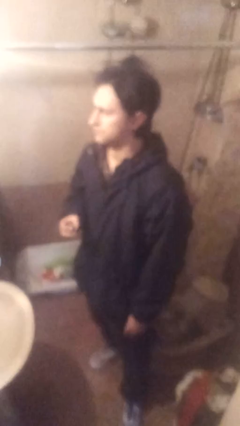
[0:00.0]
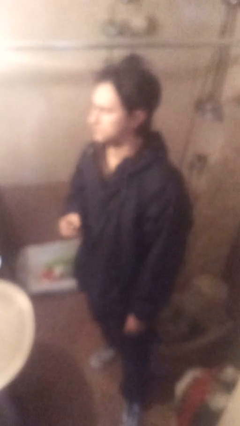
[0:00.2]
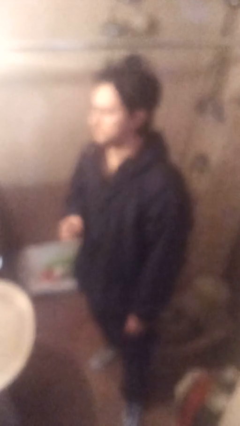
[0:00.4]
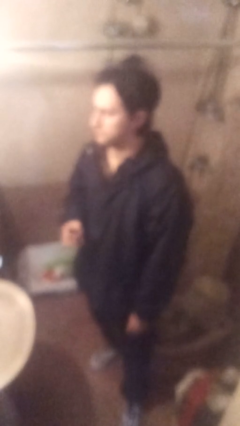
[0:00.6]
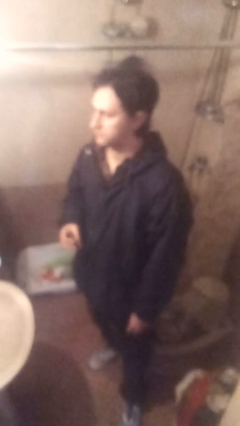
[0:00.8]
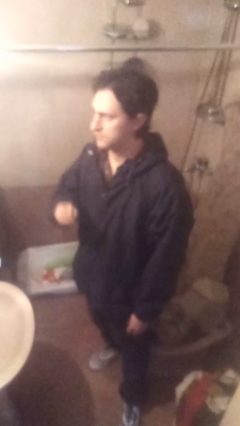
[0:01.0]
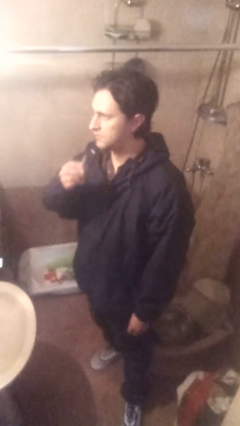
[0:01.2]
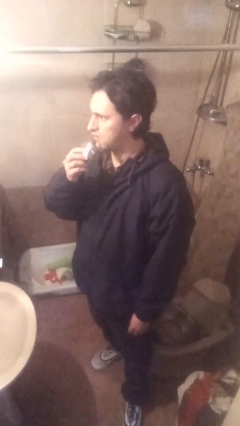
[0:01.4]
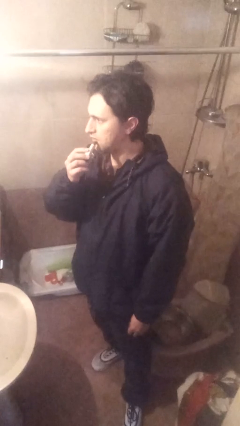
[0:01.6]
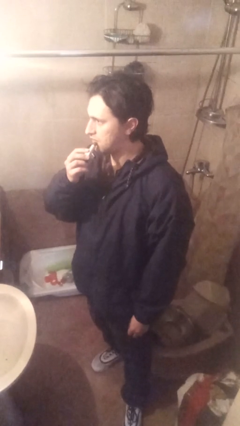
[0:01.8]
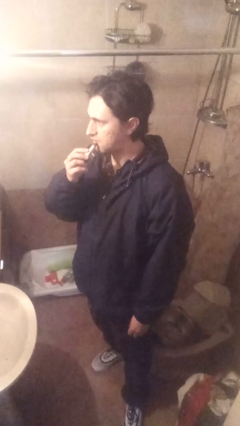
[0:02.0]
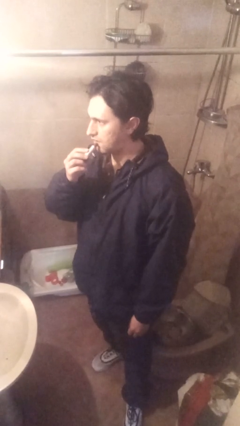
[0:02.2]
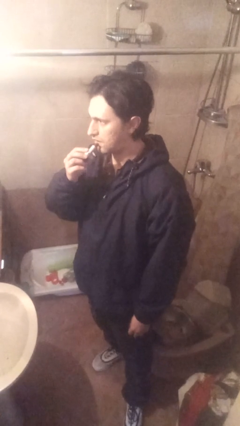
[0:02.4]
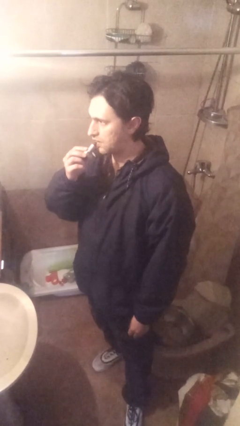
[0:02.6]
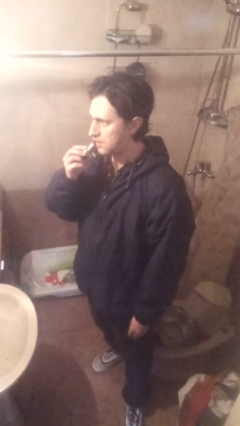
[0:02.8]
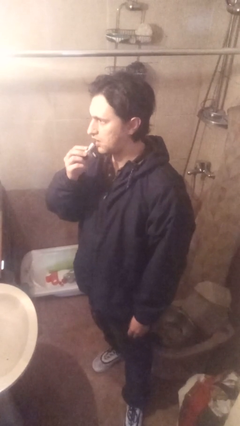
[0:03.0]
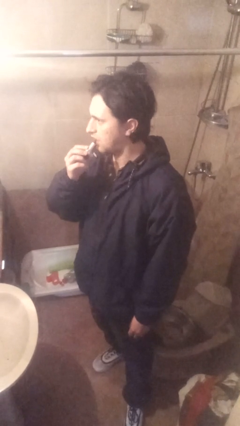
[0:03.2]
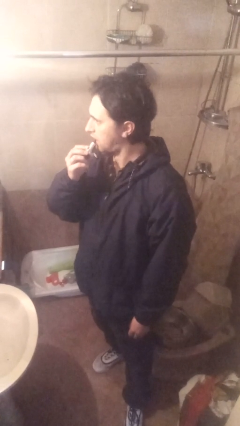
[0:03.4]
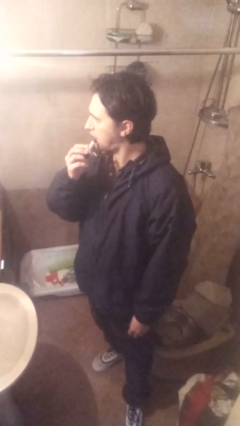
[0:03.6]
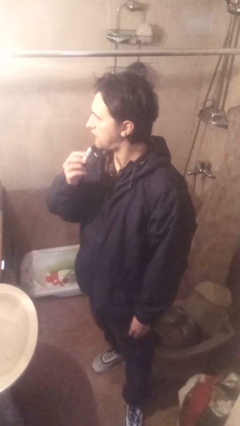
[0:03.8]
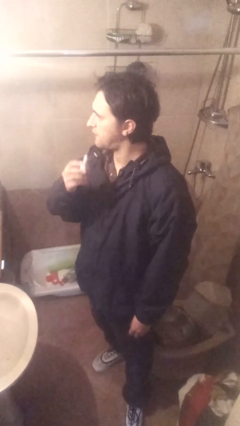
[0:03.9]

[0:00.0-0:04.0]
person applies lip makeup

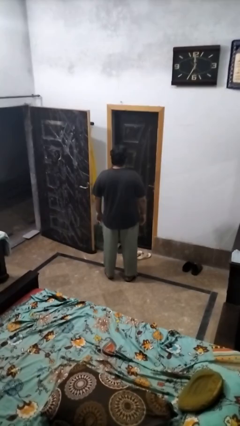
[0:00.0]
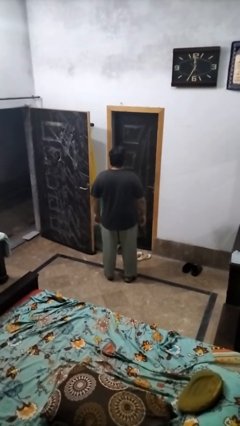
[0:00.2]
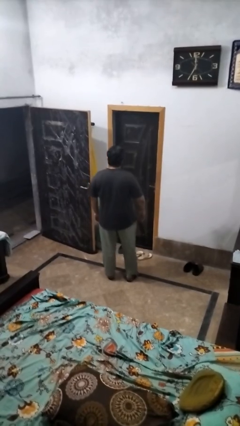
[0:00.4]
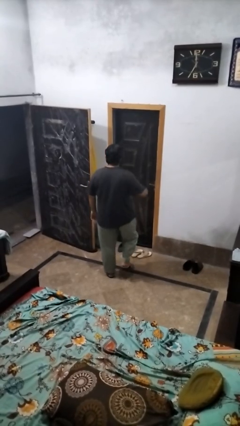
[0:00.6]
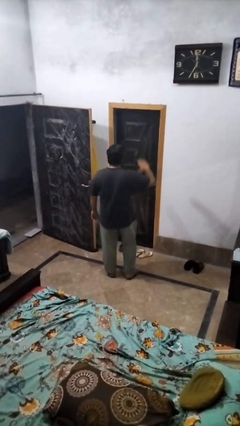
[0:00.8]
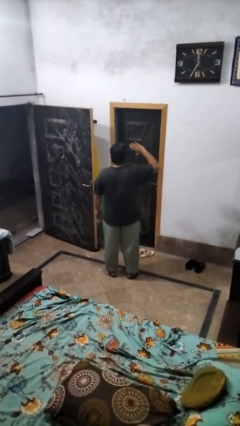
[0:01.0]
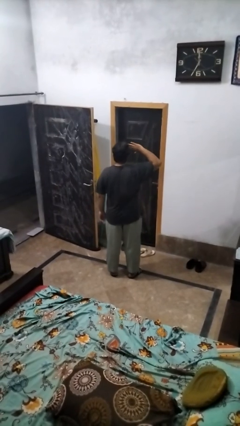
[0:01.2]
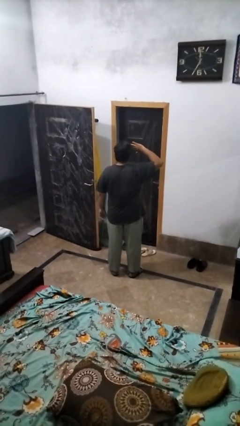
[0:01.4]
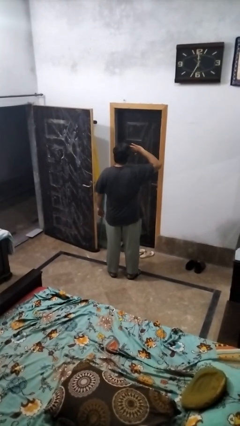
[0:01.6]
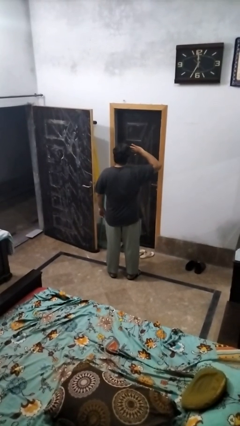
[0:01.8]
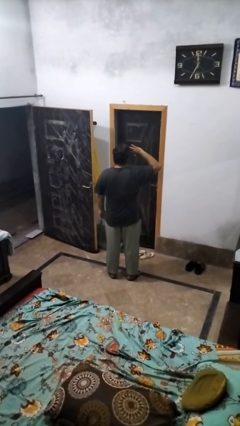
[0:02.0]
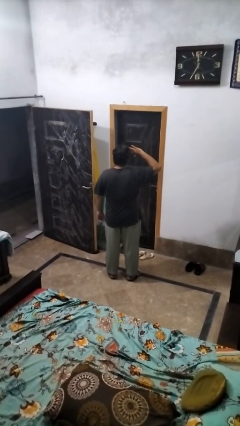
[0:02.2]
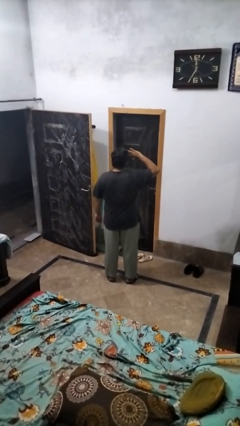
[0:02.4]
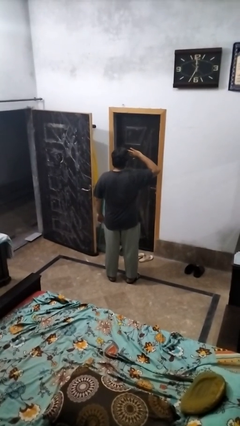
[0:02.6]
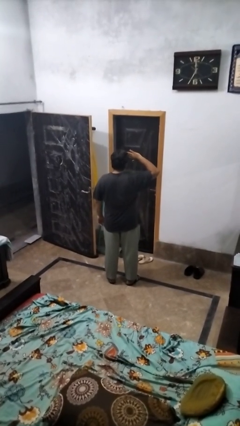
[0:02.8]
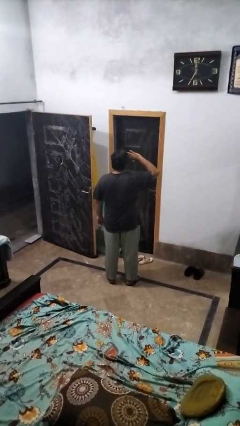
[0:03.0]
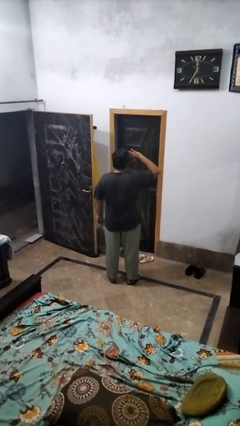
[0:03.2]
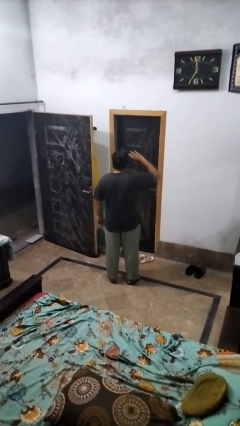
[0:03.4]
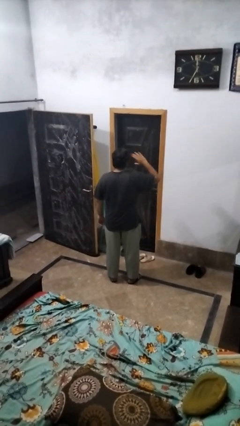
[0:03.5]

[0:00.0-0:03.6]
person salutes

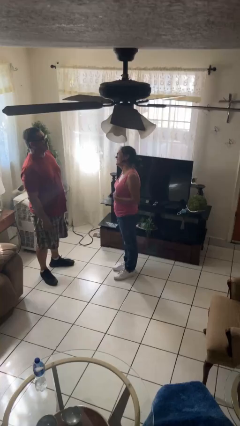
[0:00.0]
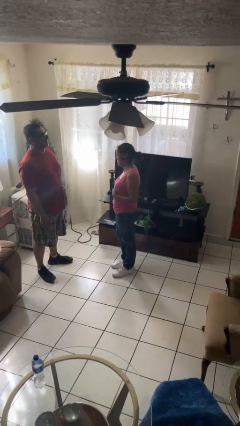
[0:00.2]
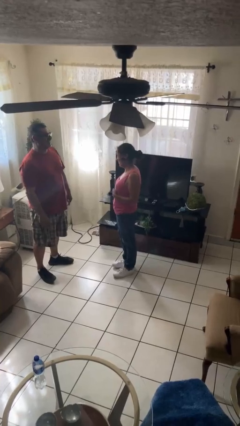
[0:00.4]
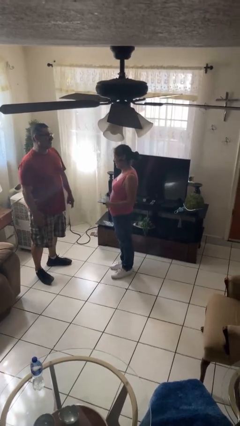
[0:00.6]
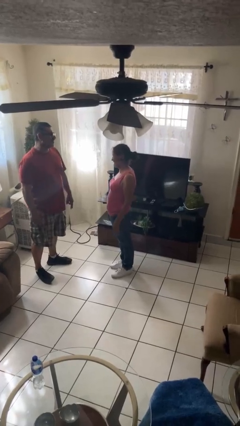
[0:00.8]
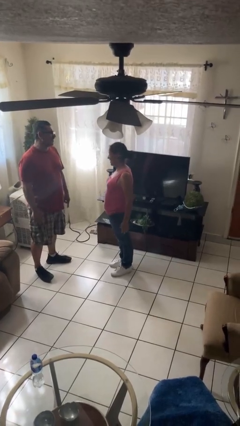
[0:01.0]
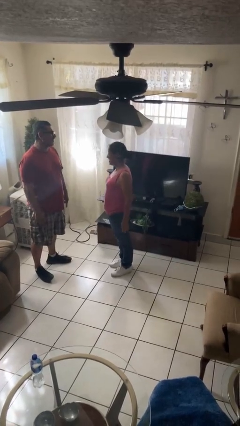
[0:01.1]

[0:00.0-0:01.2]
person laughs with person

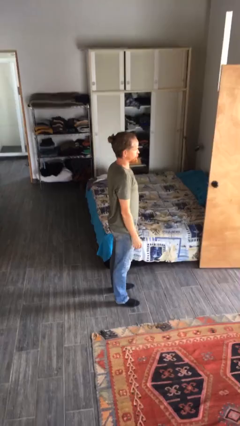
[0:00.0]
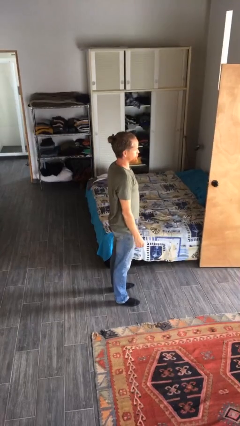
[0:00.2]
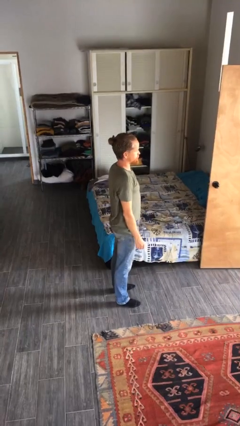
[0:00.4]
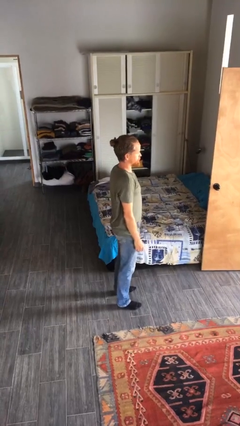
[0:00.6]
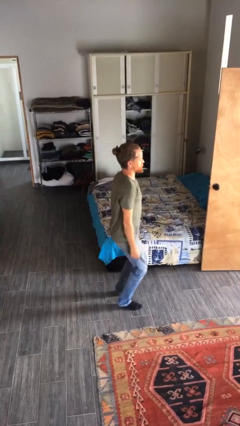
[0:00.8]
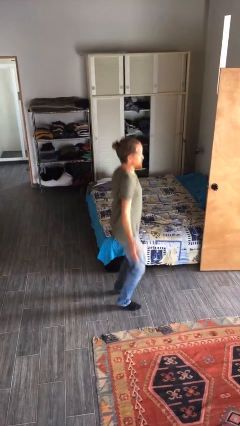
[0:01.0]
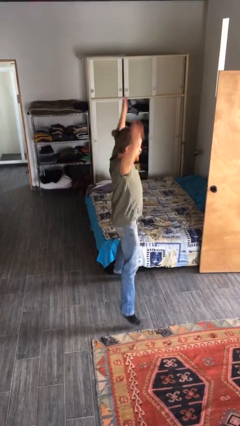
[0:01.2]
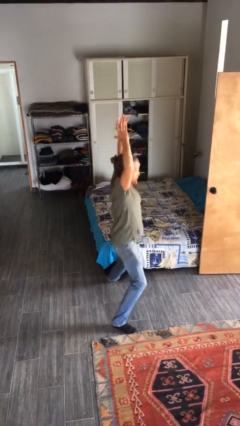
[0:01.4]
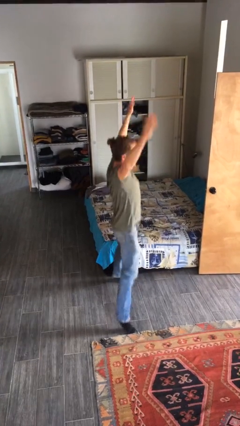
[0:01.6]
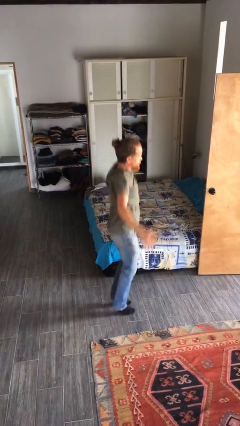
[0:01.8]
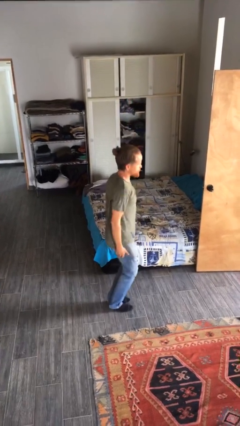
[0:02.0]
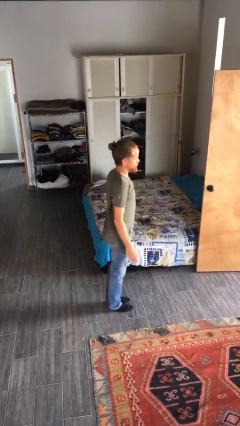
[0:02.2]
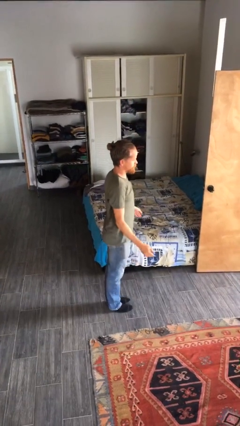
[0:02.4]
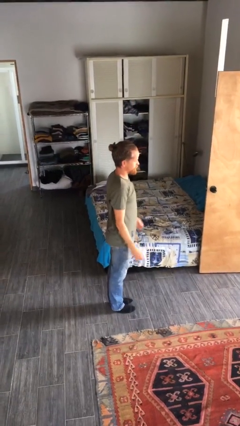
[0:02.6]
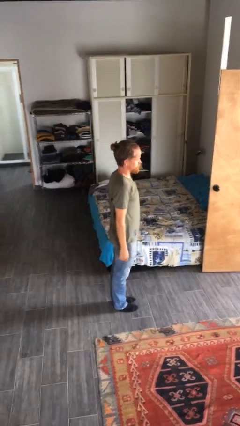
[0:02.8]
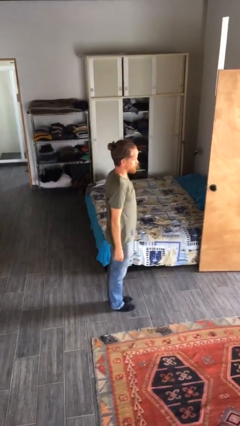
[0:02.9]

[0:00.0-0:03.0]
person exercises with jumping jacks

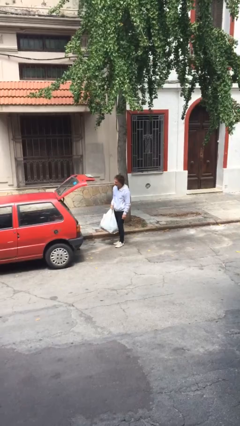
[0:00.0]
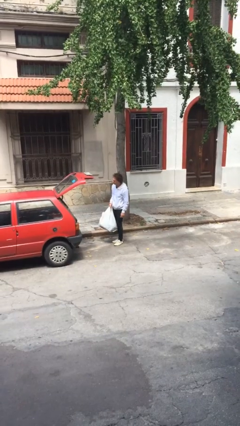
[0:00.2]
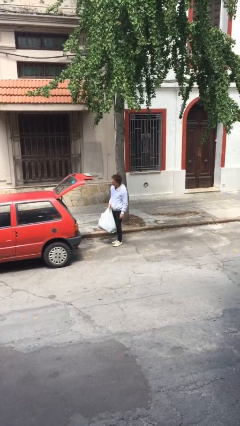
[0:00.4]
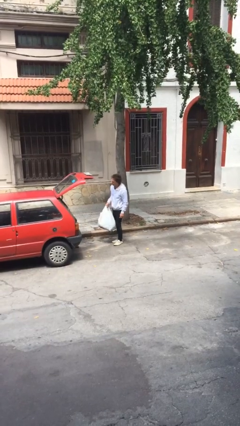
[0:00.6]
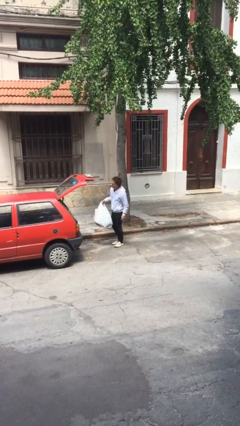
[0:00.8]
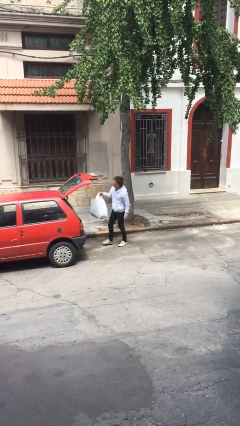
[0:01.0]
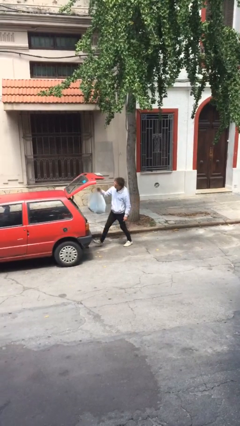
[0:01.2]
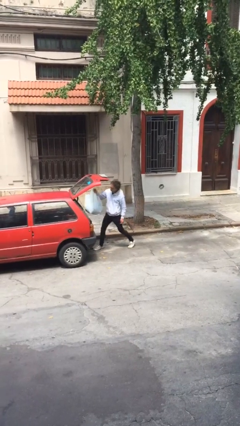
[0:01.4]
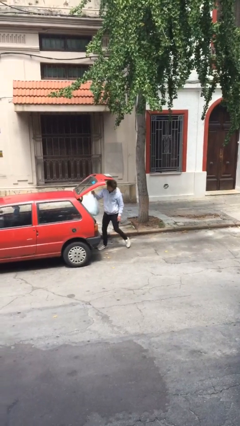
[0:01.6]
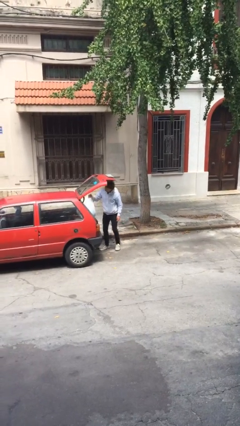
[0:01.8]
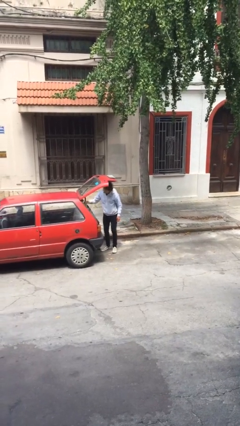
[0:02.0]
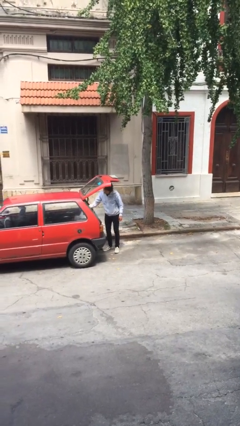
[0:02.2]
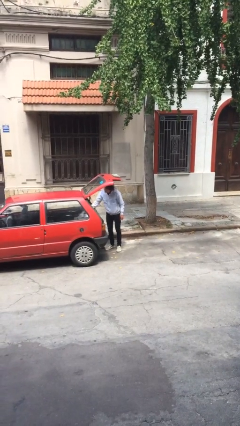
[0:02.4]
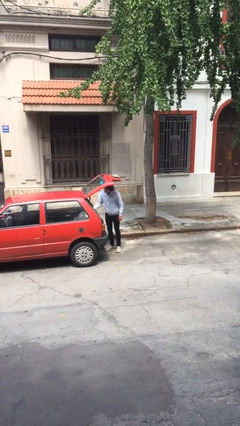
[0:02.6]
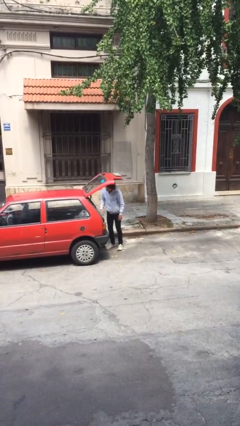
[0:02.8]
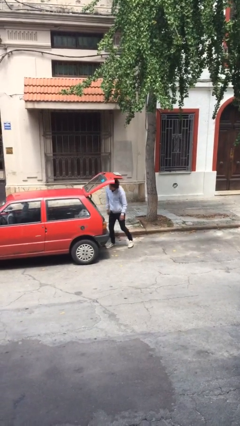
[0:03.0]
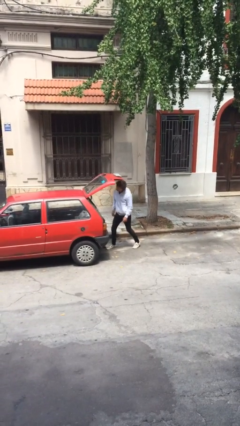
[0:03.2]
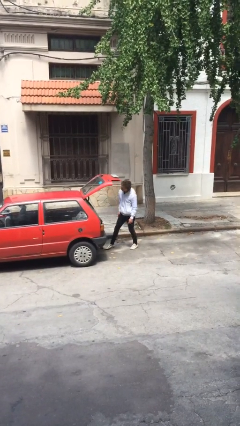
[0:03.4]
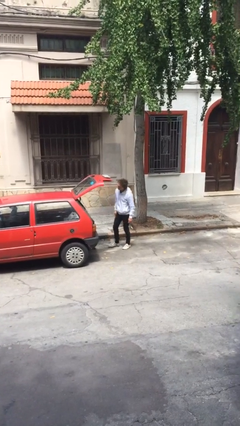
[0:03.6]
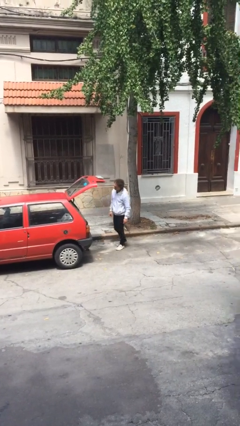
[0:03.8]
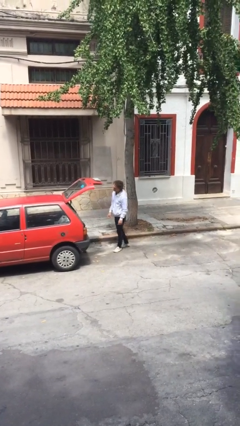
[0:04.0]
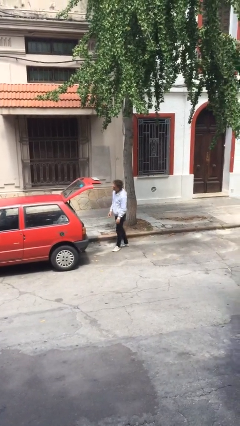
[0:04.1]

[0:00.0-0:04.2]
person loads car

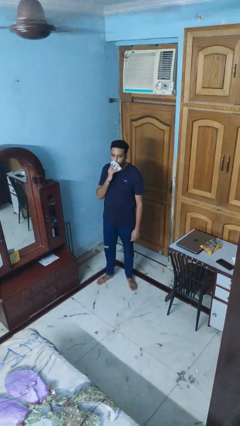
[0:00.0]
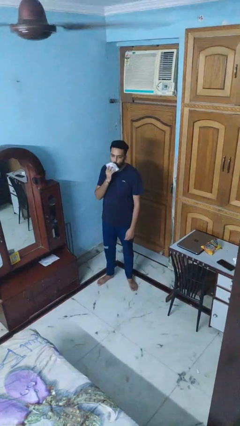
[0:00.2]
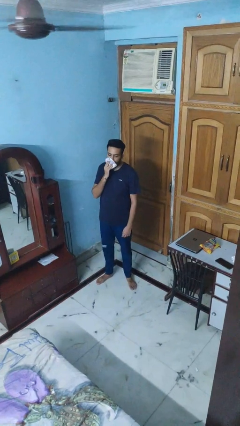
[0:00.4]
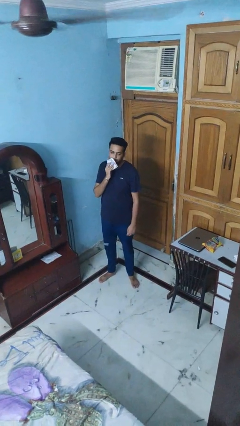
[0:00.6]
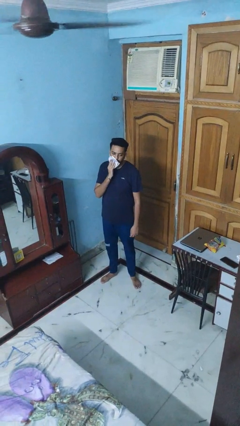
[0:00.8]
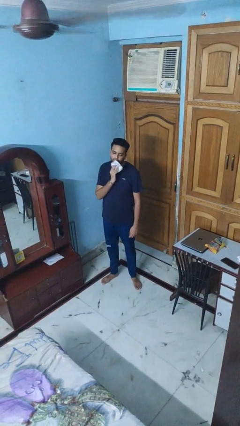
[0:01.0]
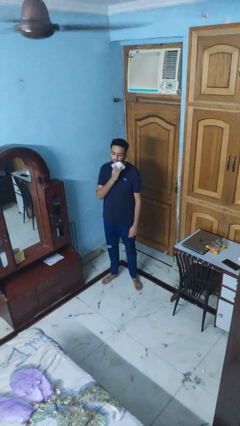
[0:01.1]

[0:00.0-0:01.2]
person wipes mouth with napkin

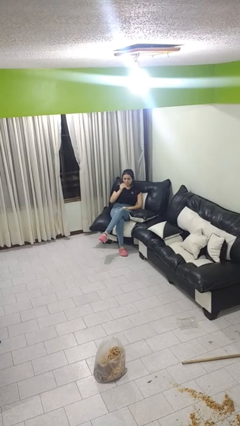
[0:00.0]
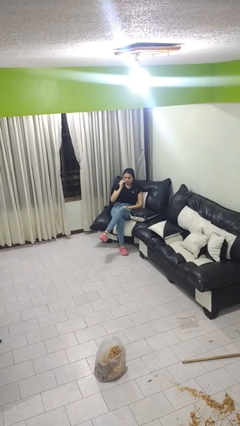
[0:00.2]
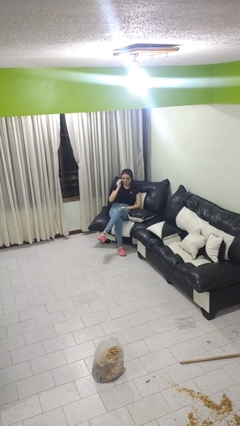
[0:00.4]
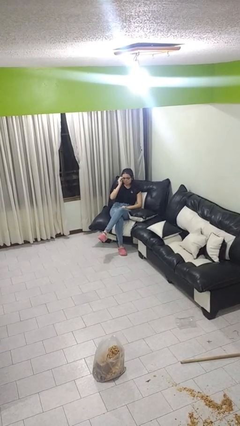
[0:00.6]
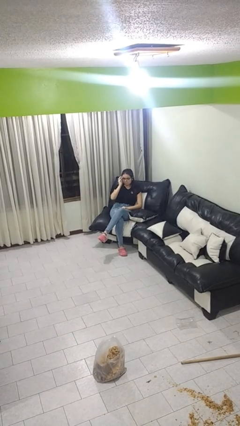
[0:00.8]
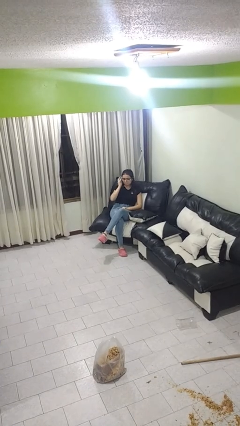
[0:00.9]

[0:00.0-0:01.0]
person puts on glasses
